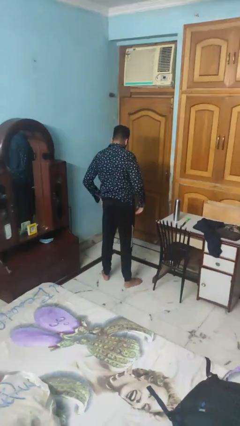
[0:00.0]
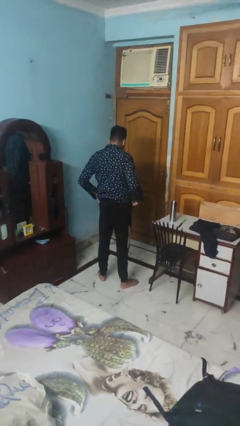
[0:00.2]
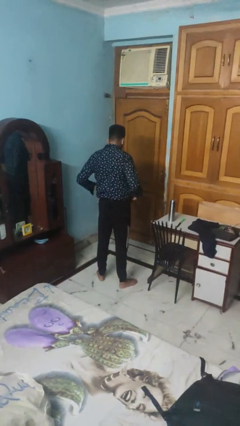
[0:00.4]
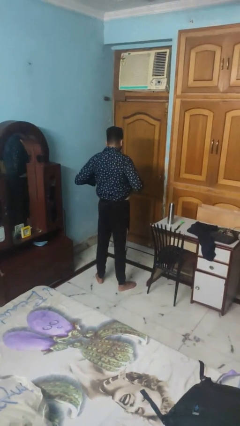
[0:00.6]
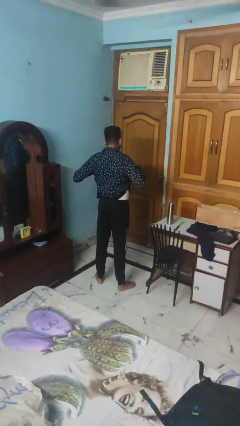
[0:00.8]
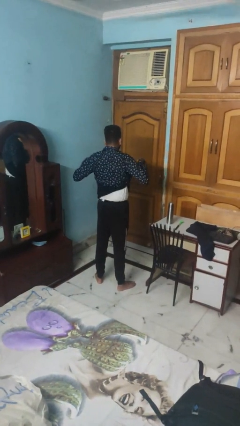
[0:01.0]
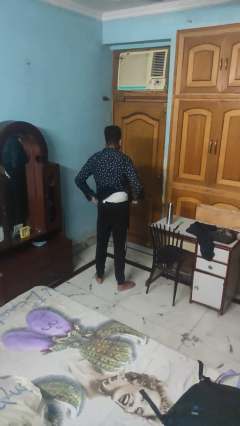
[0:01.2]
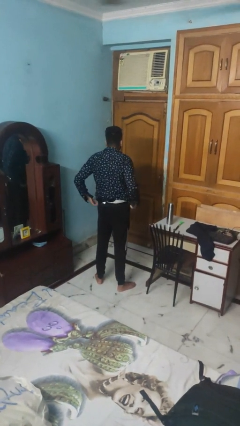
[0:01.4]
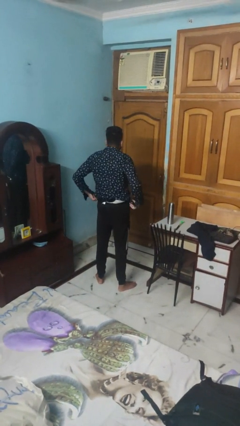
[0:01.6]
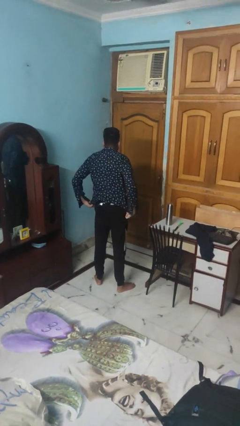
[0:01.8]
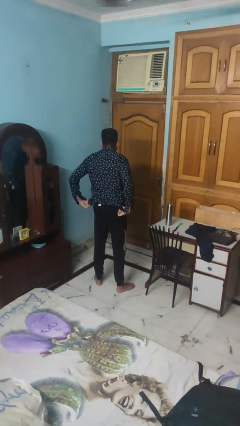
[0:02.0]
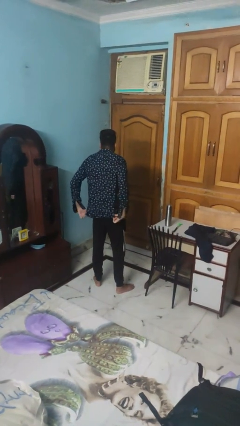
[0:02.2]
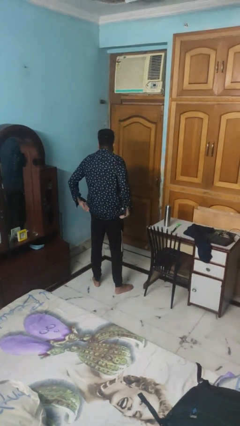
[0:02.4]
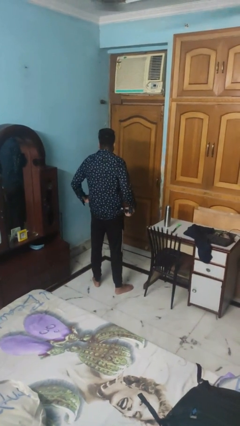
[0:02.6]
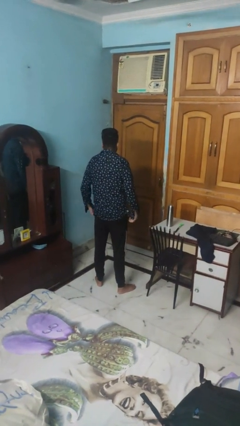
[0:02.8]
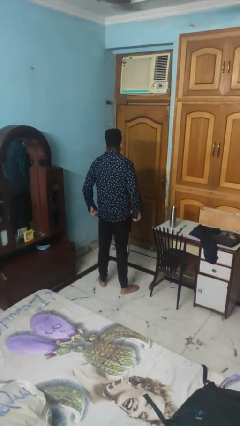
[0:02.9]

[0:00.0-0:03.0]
person untucks shirt

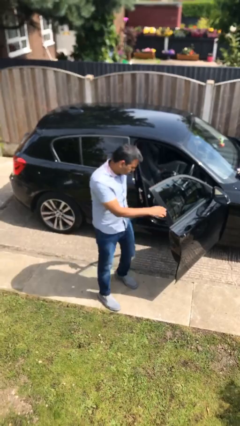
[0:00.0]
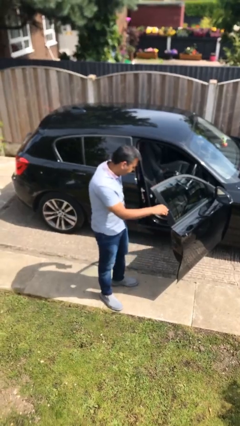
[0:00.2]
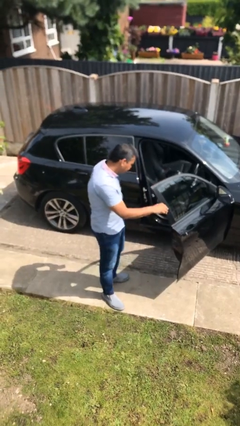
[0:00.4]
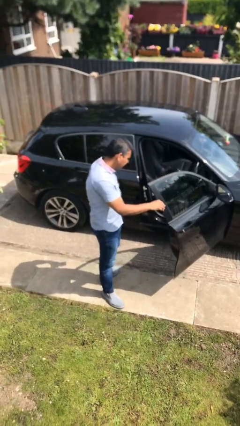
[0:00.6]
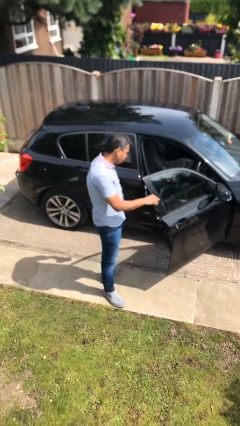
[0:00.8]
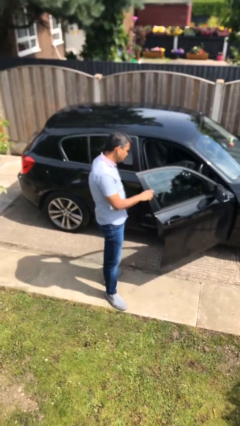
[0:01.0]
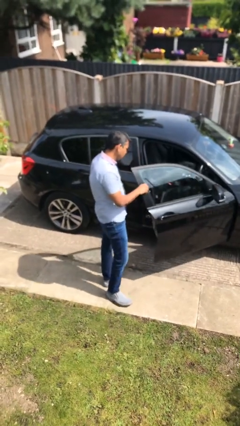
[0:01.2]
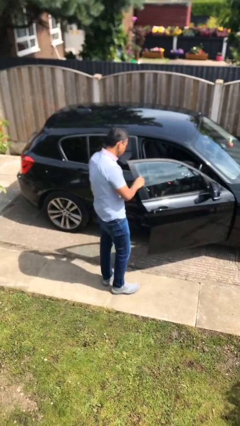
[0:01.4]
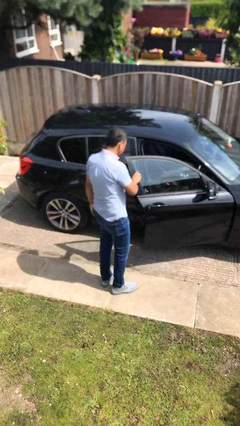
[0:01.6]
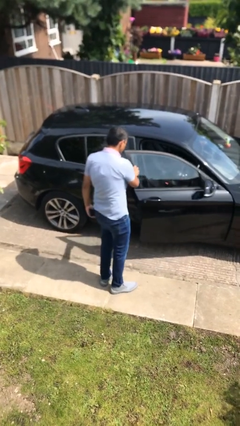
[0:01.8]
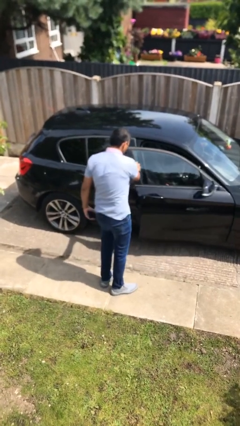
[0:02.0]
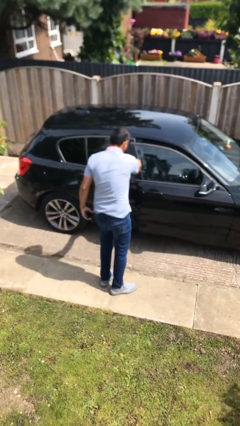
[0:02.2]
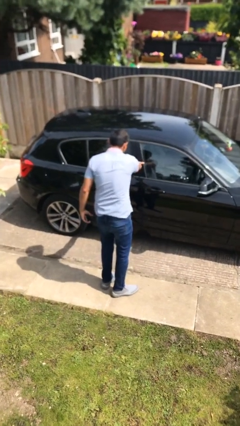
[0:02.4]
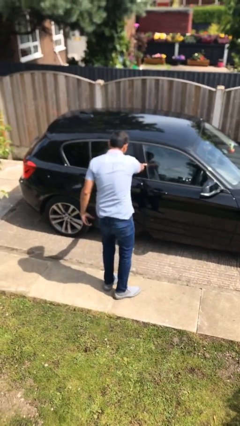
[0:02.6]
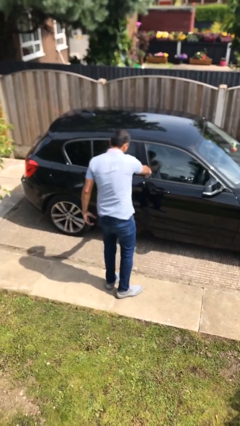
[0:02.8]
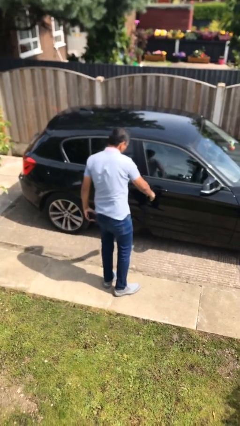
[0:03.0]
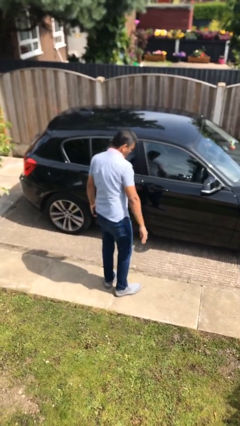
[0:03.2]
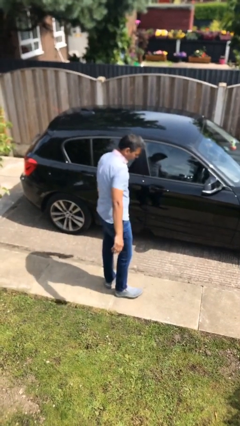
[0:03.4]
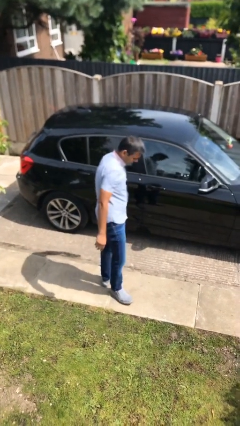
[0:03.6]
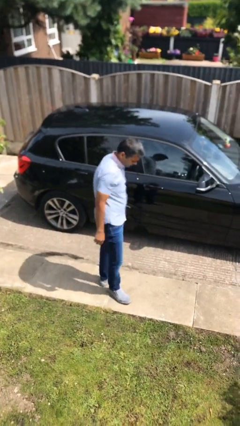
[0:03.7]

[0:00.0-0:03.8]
person closes car door

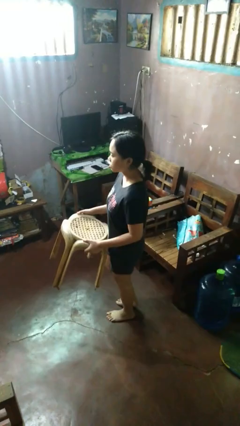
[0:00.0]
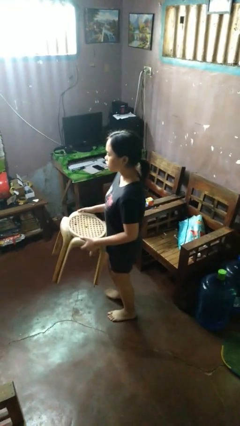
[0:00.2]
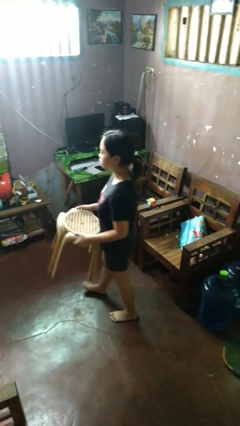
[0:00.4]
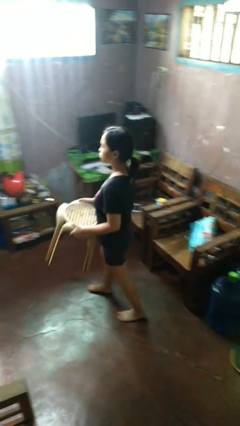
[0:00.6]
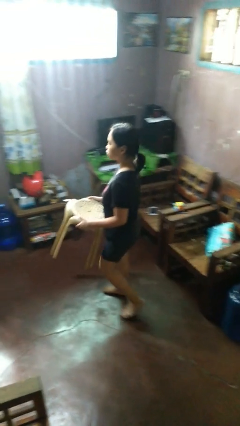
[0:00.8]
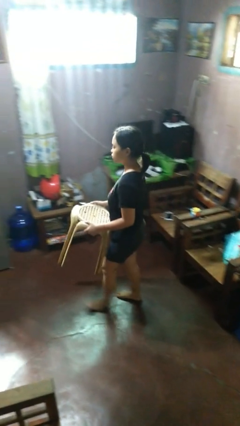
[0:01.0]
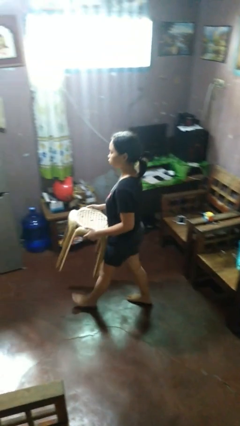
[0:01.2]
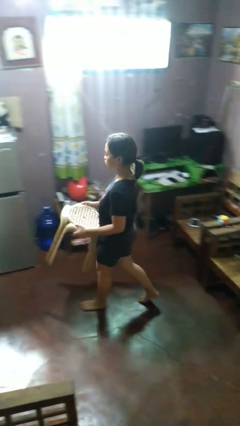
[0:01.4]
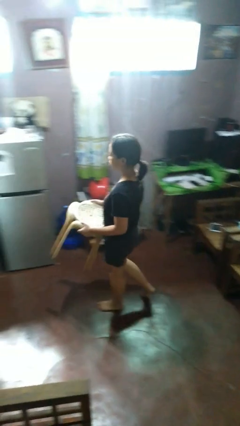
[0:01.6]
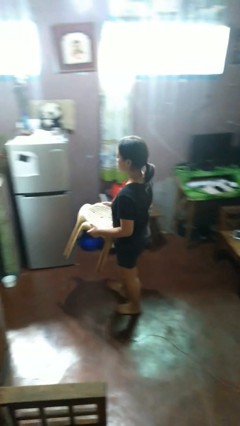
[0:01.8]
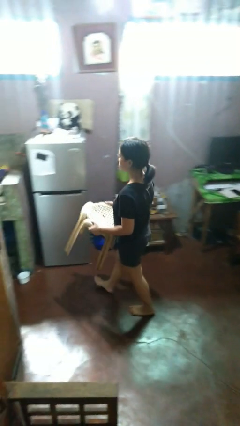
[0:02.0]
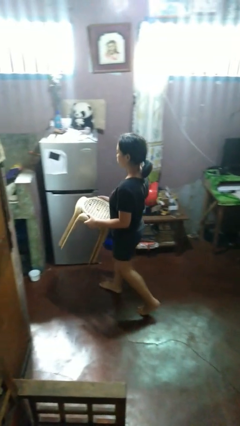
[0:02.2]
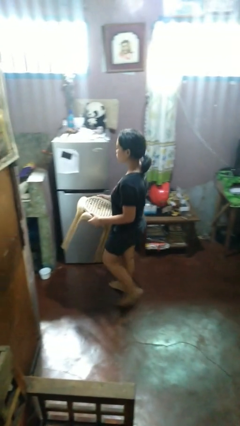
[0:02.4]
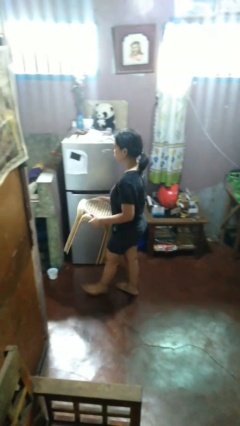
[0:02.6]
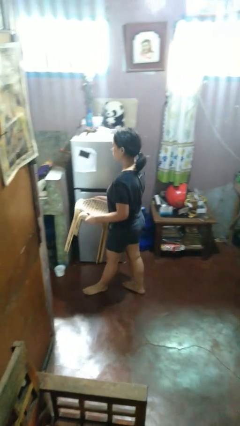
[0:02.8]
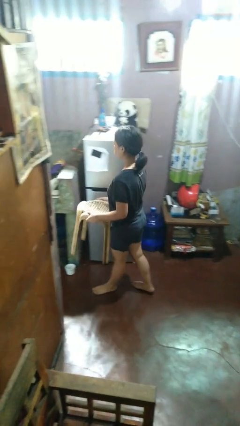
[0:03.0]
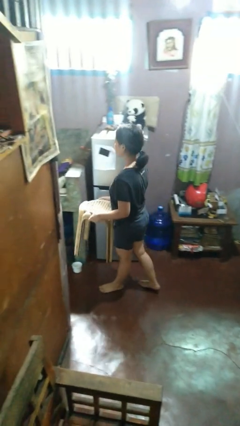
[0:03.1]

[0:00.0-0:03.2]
person carries furniture

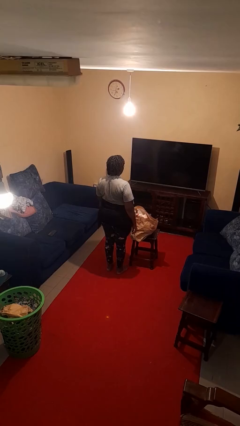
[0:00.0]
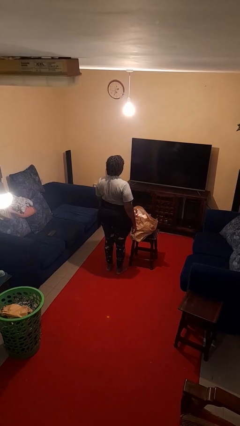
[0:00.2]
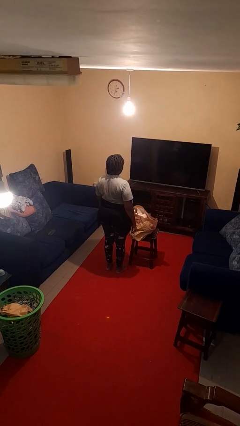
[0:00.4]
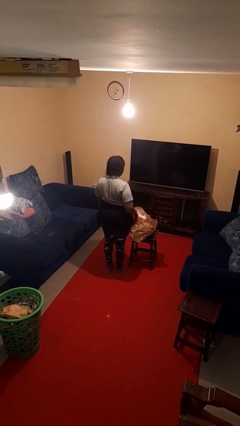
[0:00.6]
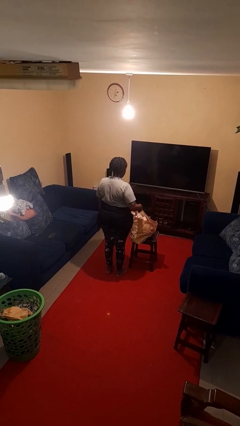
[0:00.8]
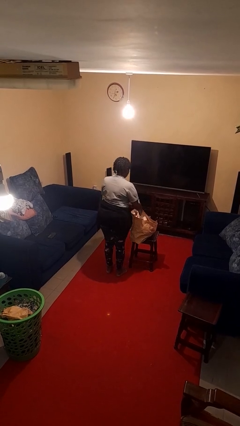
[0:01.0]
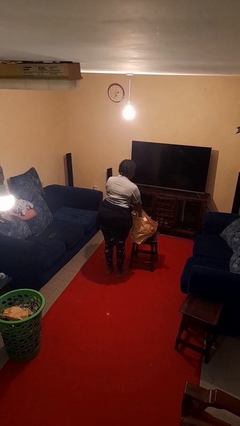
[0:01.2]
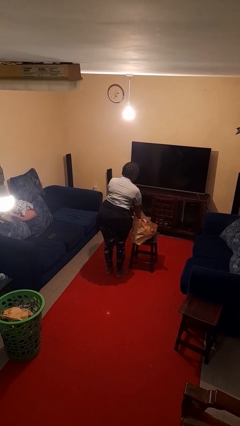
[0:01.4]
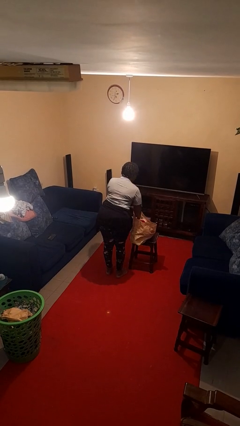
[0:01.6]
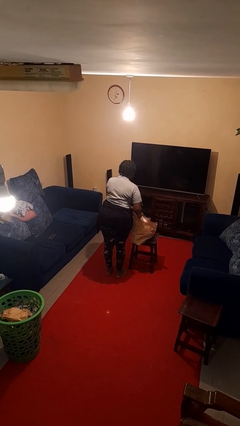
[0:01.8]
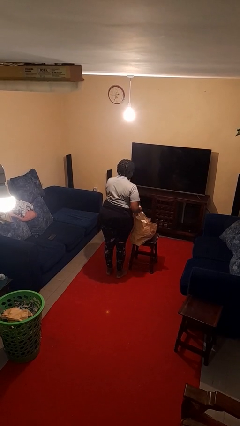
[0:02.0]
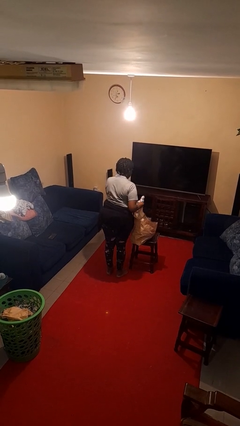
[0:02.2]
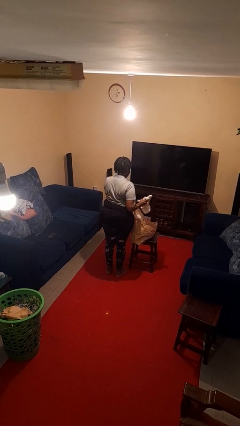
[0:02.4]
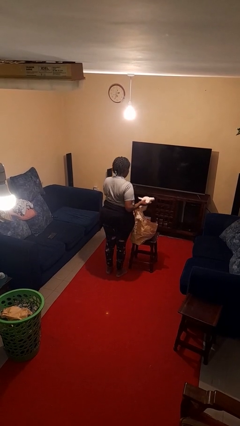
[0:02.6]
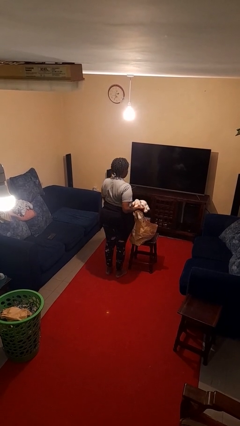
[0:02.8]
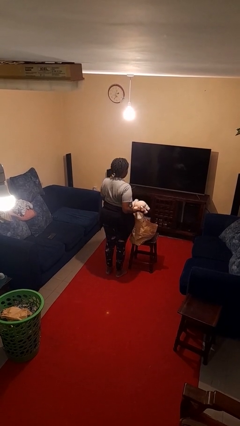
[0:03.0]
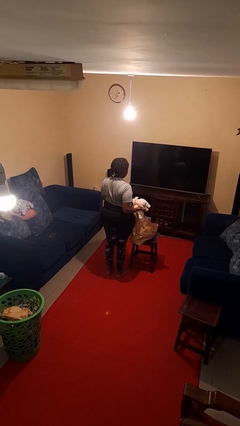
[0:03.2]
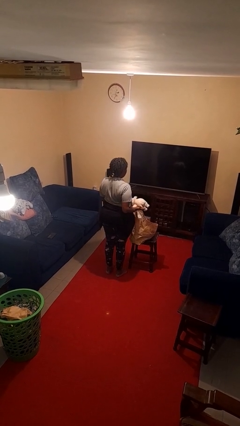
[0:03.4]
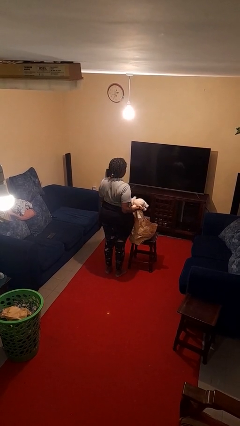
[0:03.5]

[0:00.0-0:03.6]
person takes object from bag

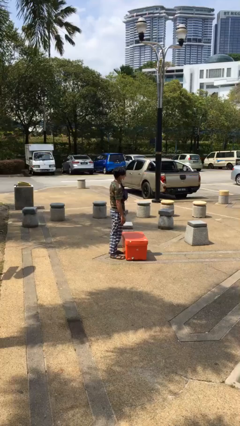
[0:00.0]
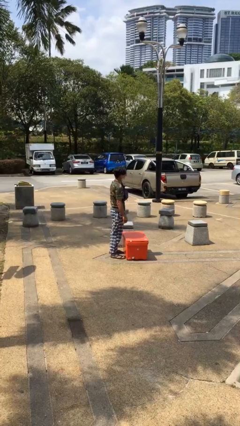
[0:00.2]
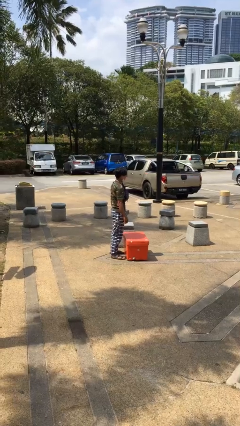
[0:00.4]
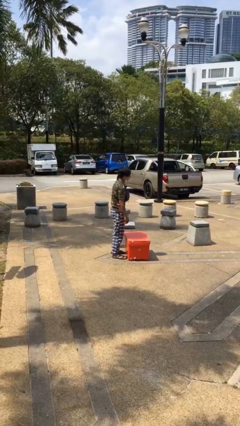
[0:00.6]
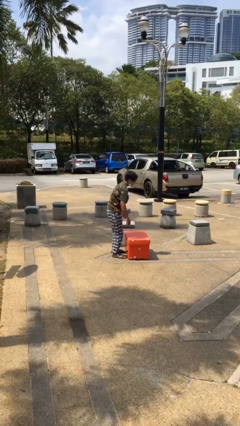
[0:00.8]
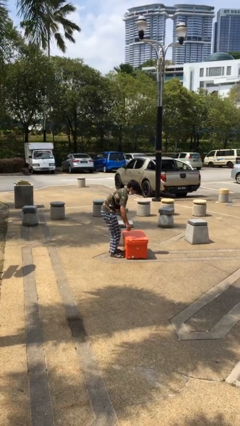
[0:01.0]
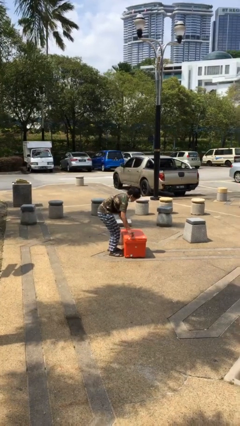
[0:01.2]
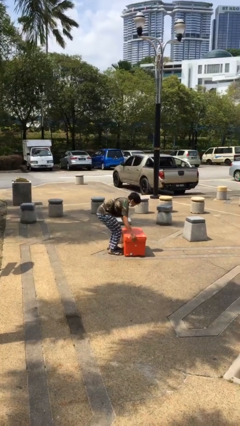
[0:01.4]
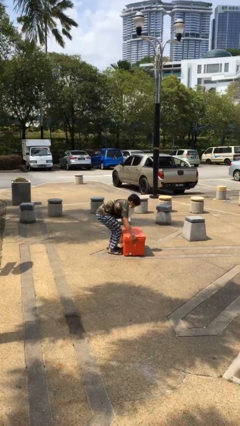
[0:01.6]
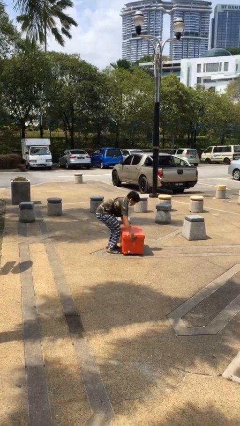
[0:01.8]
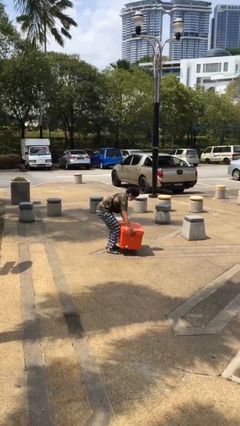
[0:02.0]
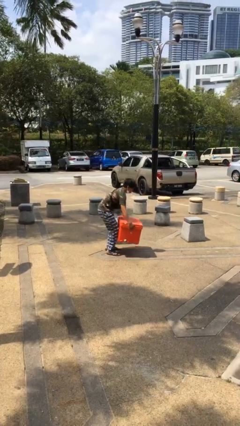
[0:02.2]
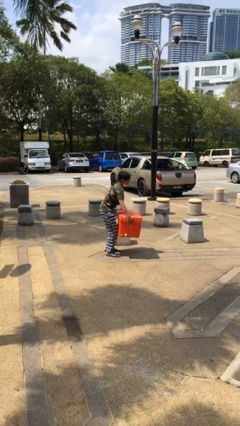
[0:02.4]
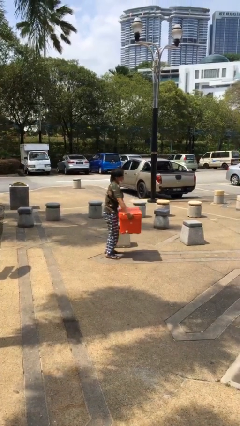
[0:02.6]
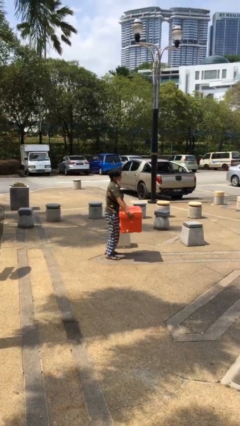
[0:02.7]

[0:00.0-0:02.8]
person picks up object from floor

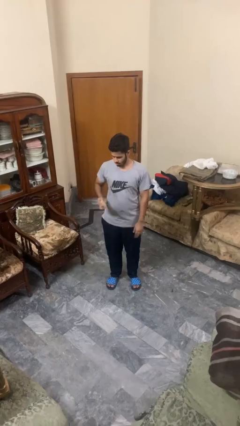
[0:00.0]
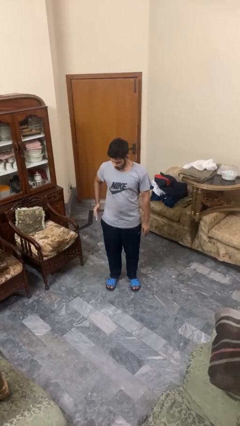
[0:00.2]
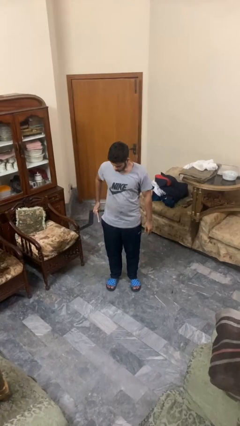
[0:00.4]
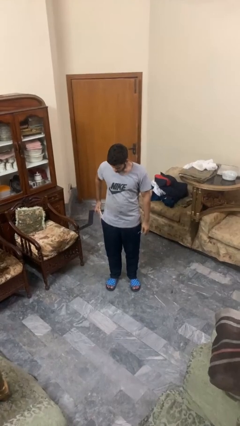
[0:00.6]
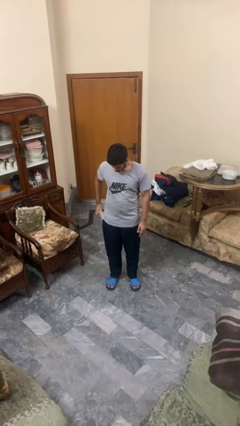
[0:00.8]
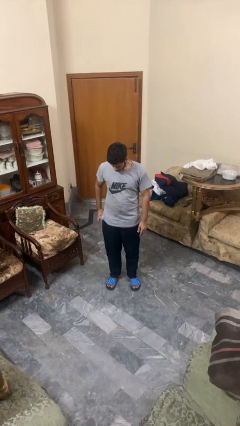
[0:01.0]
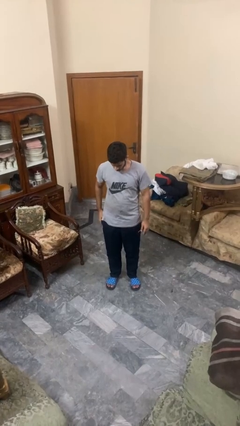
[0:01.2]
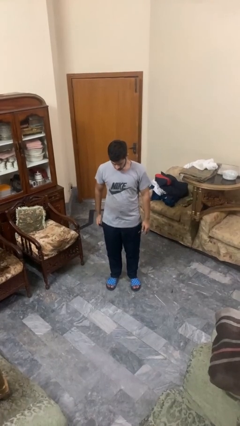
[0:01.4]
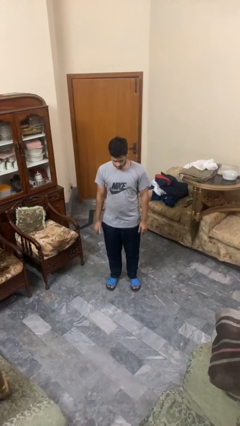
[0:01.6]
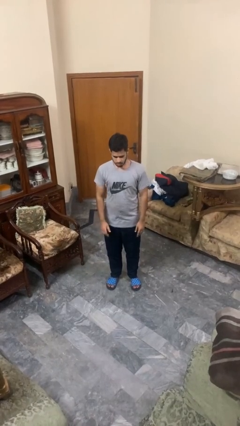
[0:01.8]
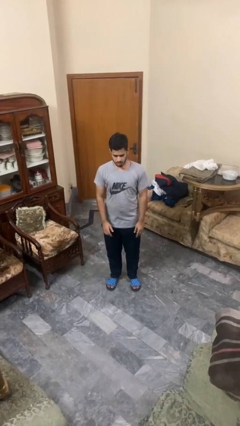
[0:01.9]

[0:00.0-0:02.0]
person puts phone into pocket
